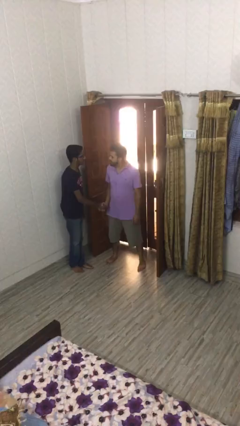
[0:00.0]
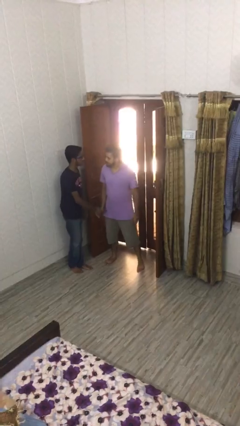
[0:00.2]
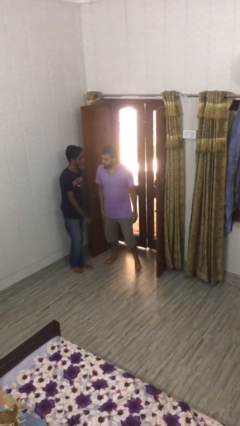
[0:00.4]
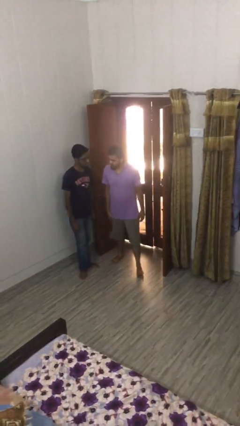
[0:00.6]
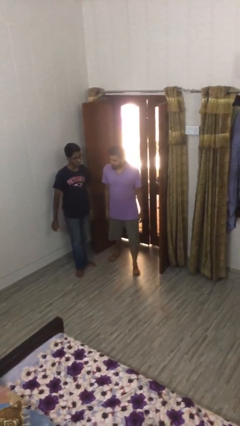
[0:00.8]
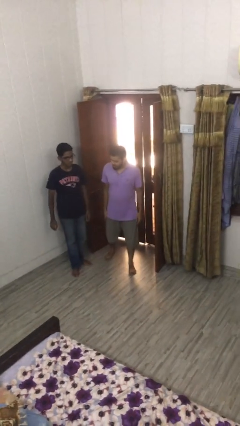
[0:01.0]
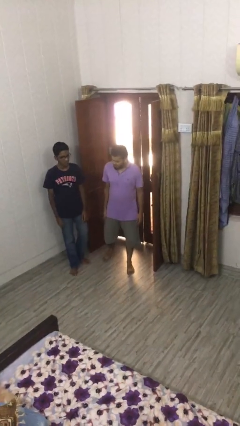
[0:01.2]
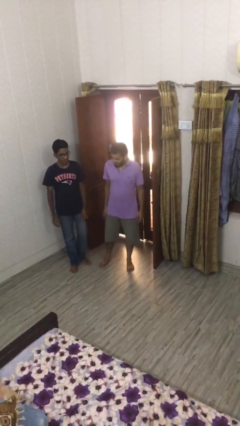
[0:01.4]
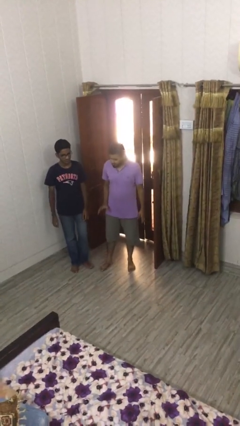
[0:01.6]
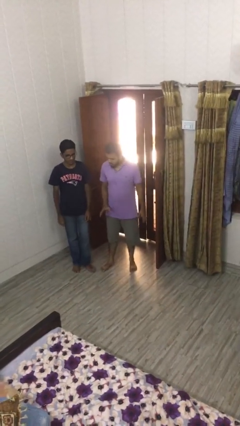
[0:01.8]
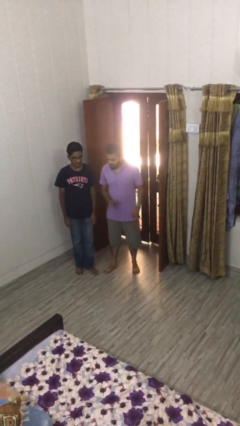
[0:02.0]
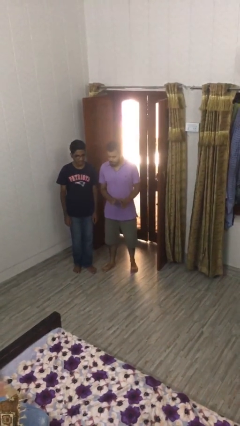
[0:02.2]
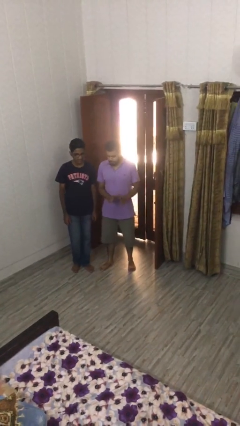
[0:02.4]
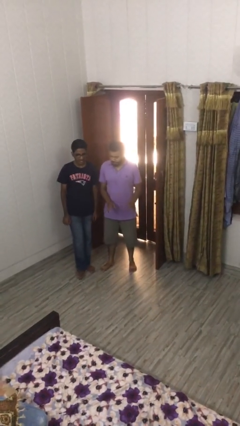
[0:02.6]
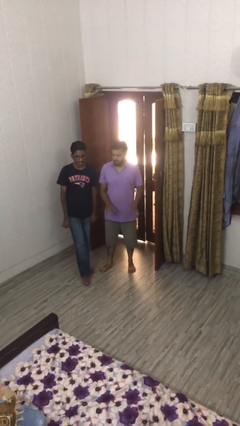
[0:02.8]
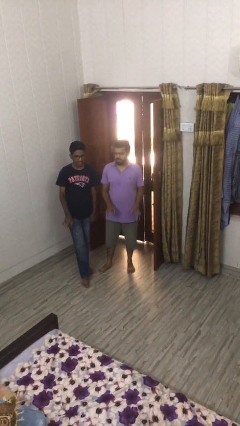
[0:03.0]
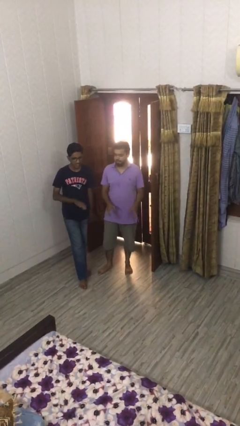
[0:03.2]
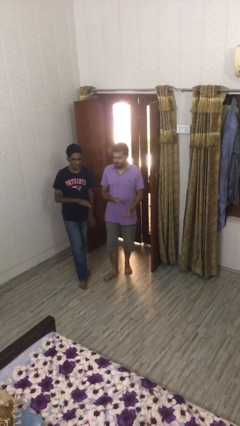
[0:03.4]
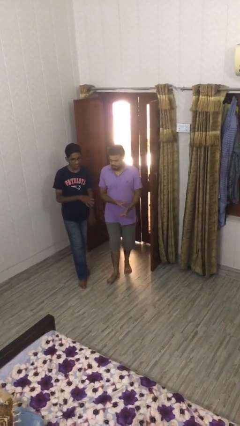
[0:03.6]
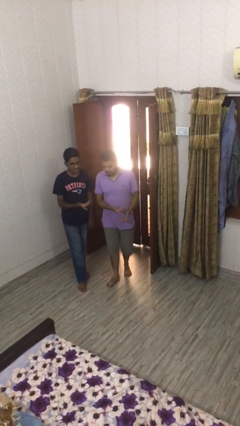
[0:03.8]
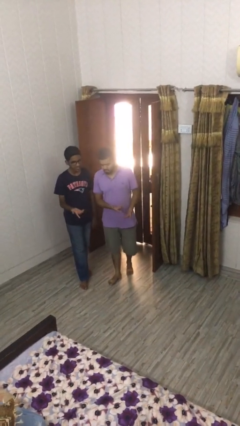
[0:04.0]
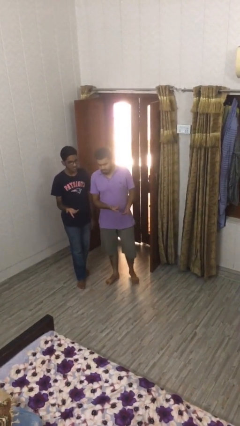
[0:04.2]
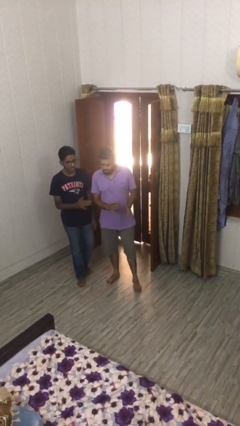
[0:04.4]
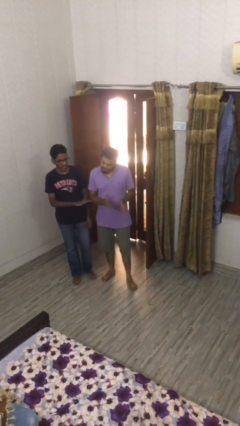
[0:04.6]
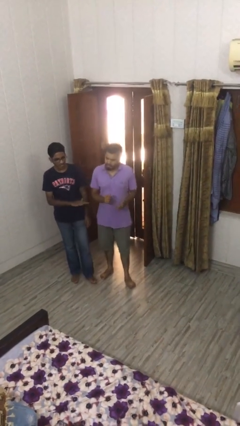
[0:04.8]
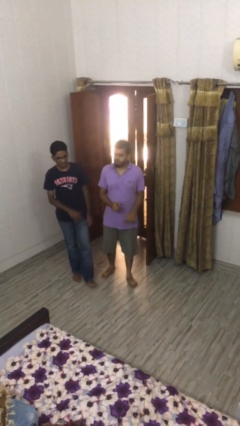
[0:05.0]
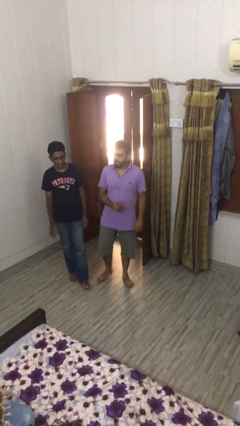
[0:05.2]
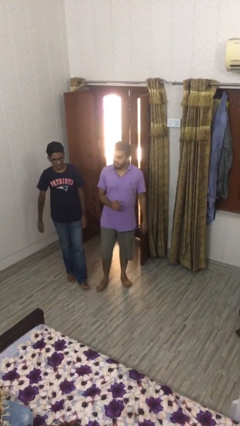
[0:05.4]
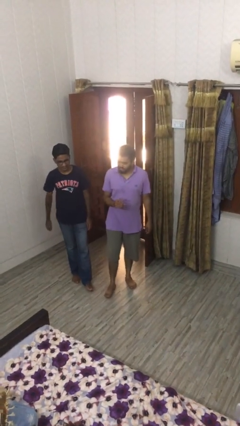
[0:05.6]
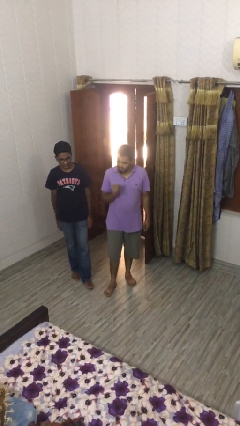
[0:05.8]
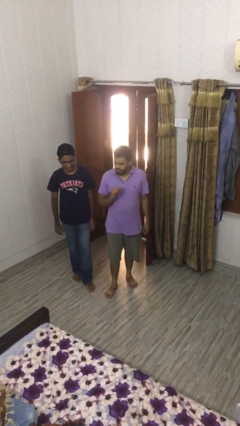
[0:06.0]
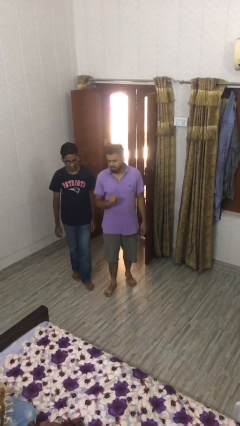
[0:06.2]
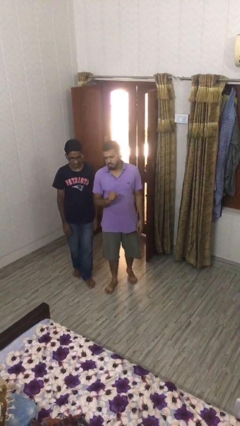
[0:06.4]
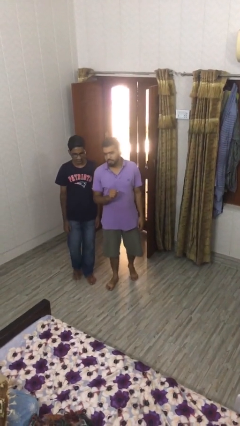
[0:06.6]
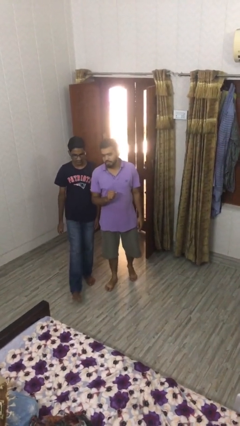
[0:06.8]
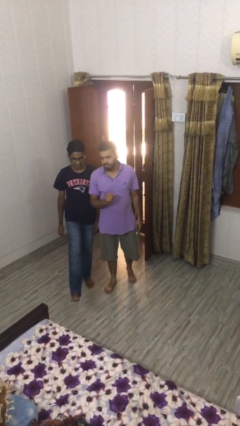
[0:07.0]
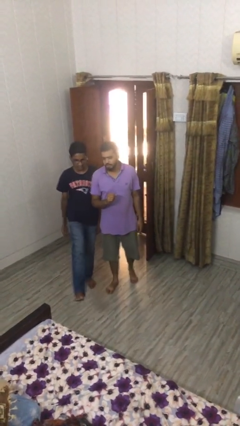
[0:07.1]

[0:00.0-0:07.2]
person talks to person

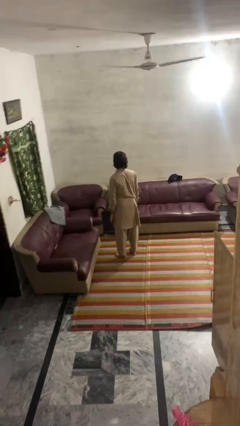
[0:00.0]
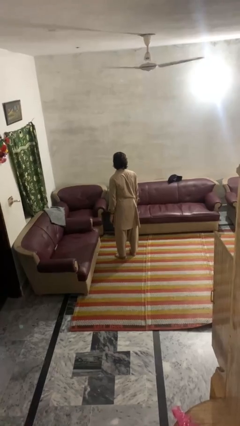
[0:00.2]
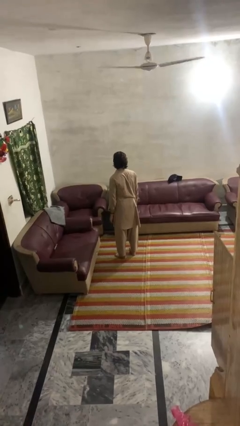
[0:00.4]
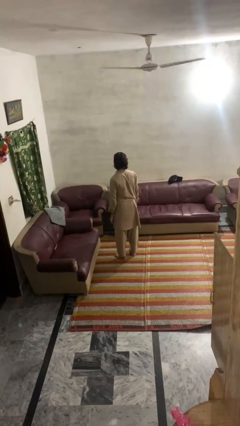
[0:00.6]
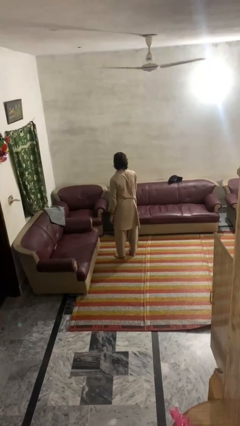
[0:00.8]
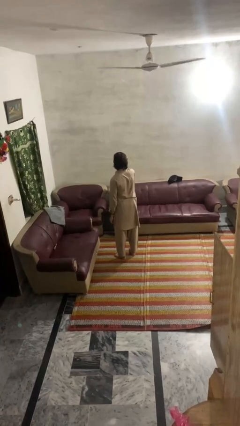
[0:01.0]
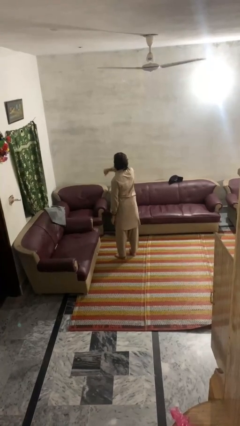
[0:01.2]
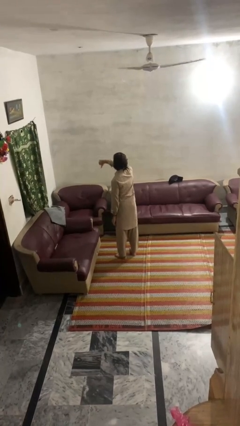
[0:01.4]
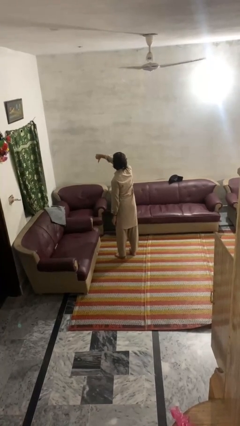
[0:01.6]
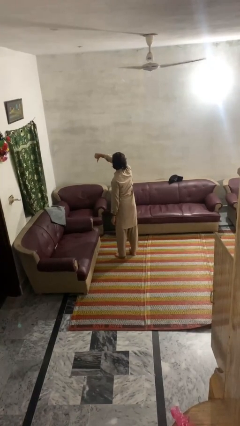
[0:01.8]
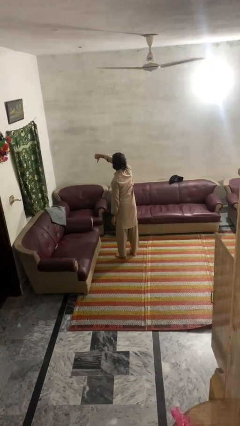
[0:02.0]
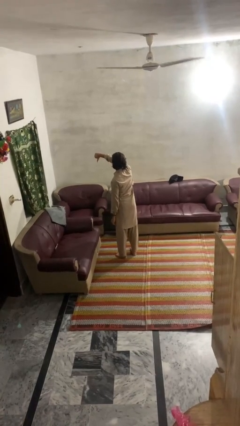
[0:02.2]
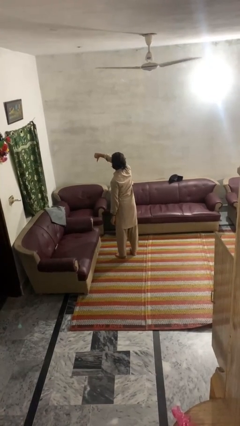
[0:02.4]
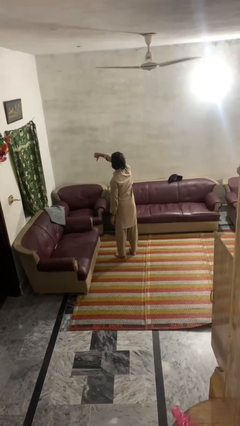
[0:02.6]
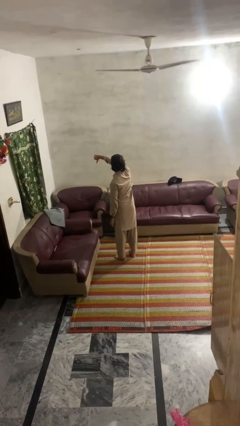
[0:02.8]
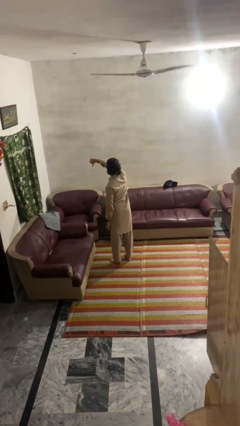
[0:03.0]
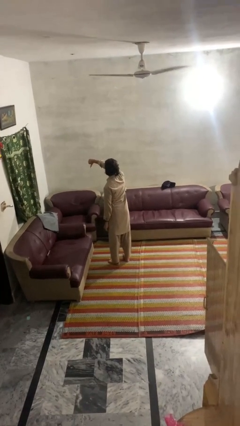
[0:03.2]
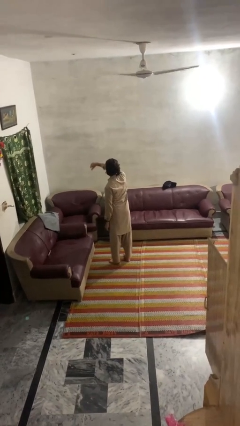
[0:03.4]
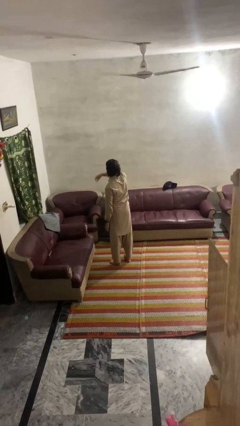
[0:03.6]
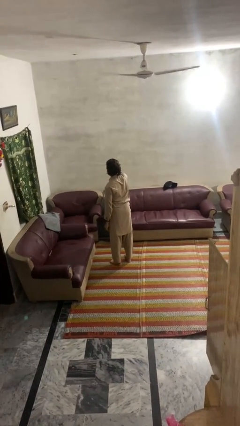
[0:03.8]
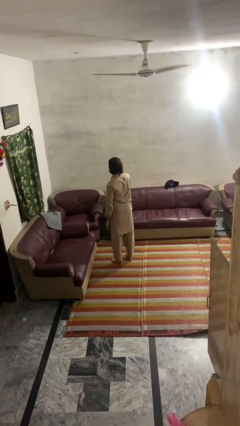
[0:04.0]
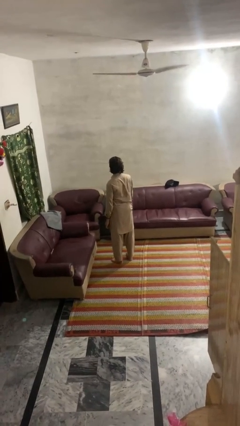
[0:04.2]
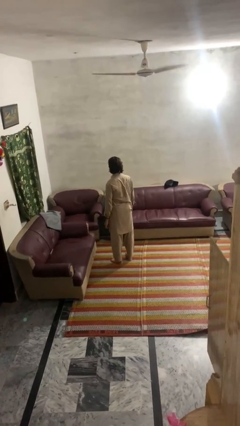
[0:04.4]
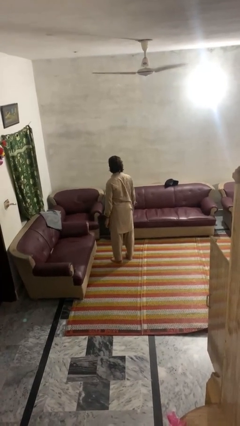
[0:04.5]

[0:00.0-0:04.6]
person gestures thumbs down

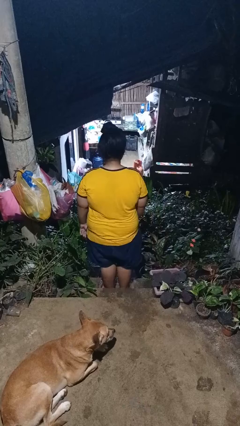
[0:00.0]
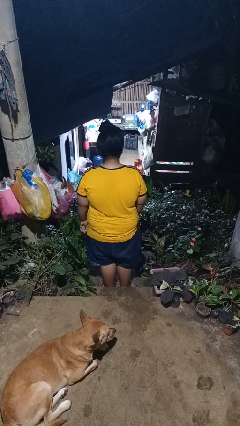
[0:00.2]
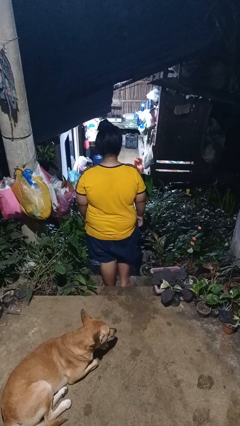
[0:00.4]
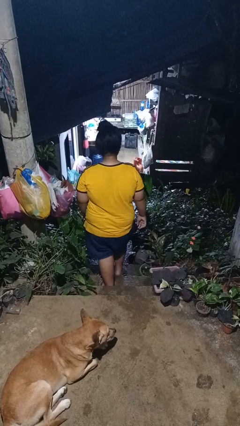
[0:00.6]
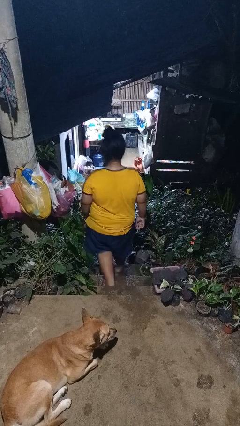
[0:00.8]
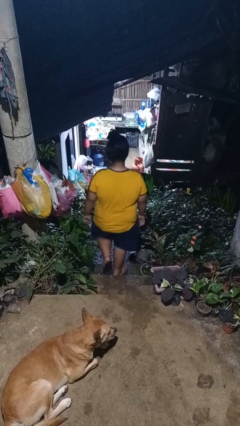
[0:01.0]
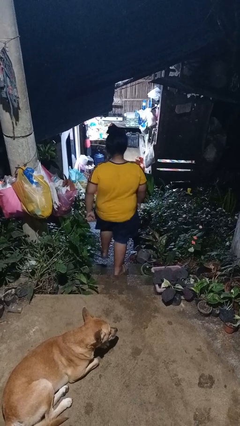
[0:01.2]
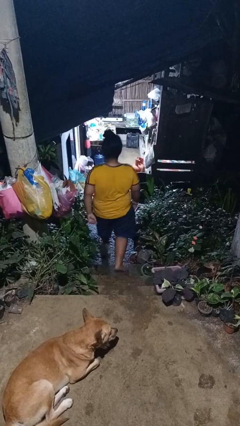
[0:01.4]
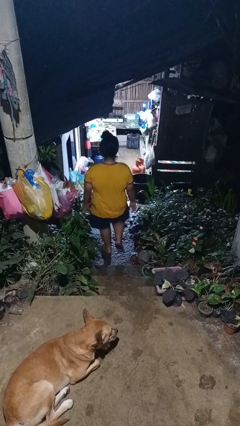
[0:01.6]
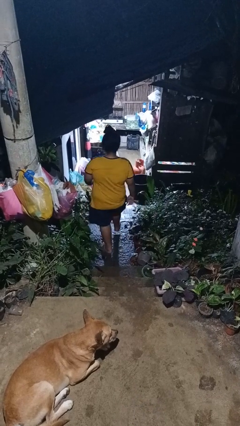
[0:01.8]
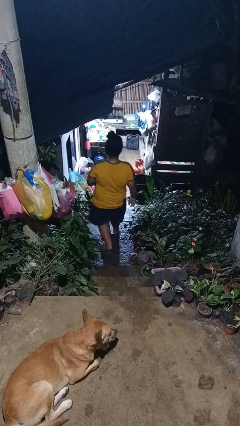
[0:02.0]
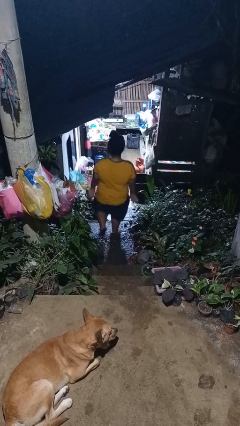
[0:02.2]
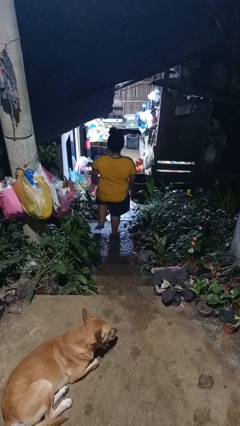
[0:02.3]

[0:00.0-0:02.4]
person climbs down stairs

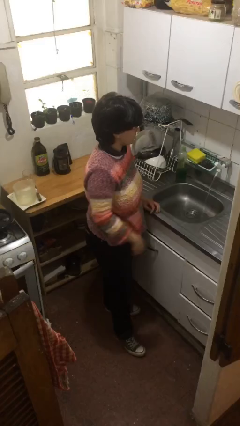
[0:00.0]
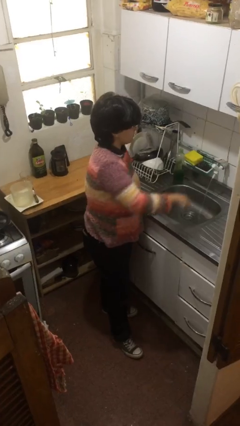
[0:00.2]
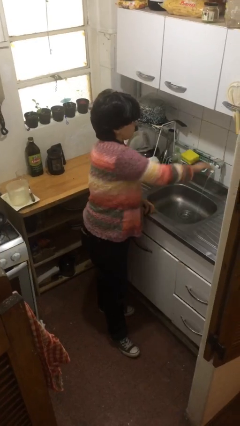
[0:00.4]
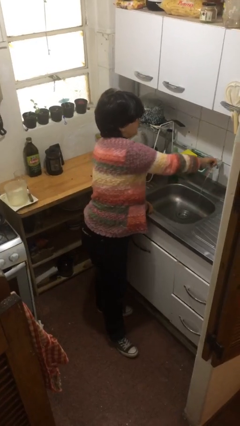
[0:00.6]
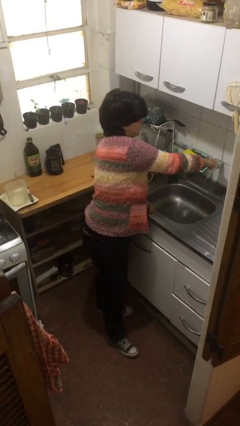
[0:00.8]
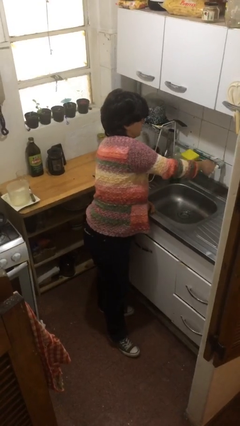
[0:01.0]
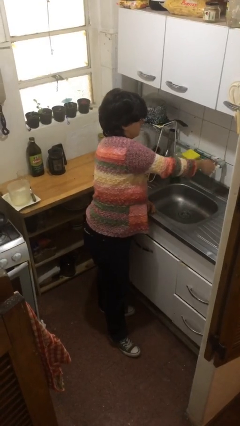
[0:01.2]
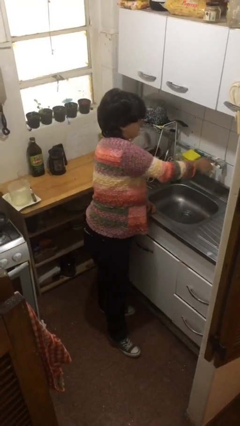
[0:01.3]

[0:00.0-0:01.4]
person turns off faucet

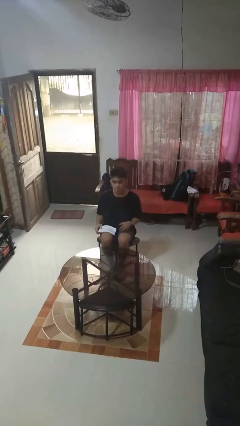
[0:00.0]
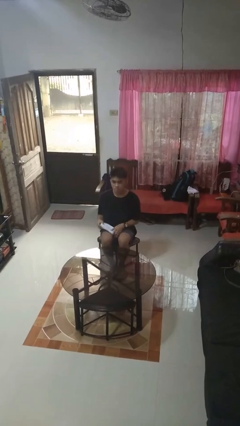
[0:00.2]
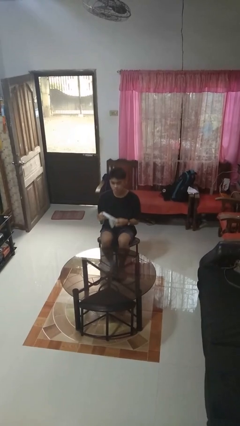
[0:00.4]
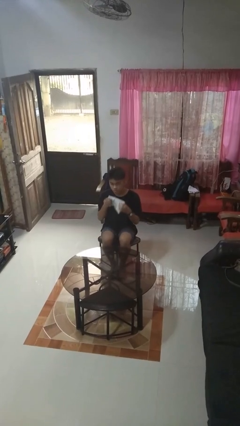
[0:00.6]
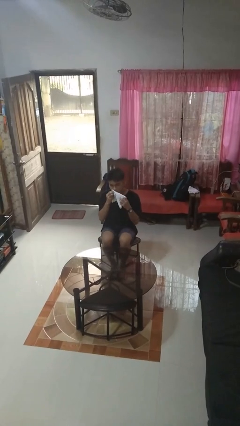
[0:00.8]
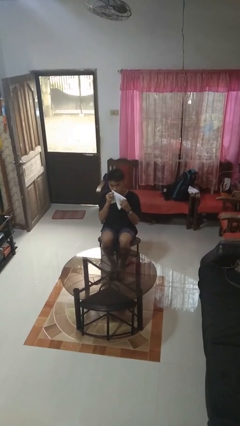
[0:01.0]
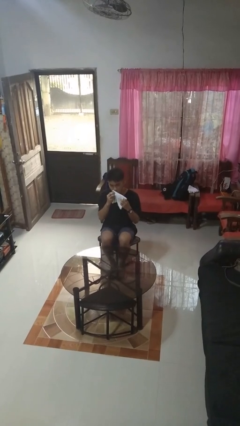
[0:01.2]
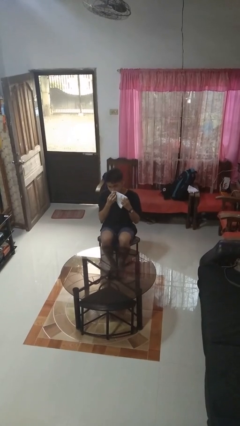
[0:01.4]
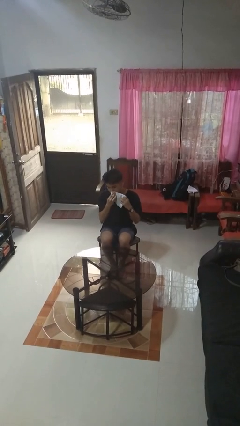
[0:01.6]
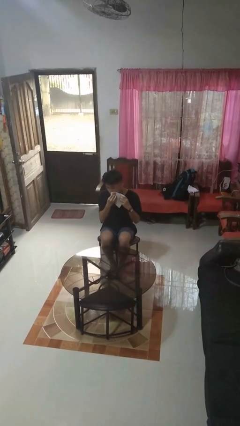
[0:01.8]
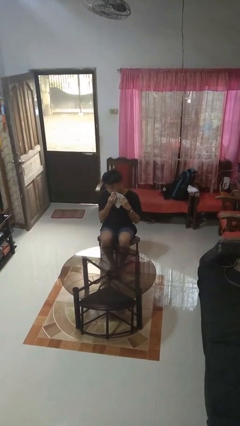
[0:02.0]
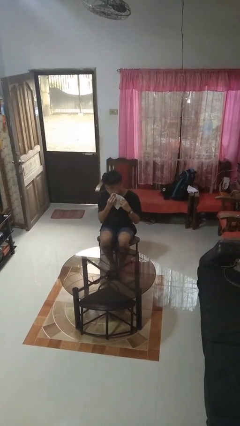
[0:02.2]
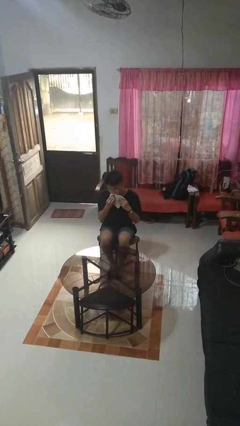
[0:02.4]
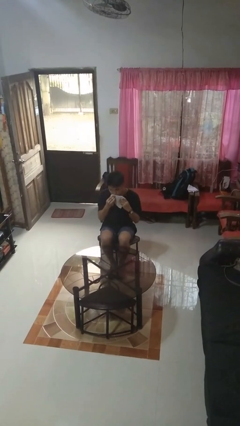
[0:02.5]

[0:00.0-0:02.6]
person wipes mouth with napkin
